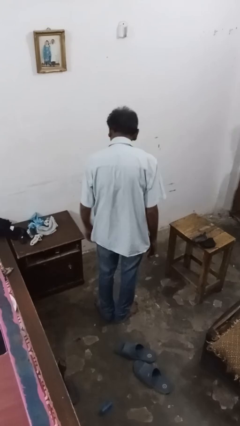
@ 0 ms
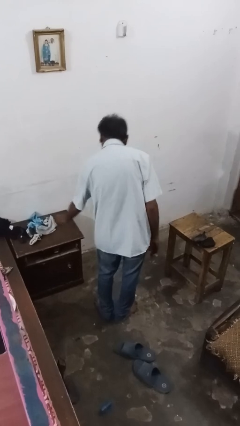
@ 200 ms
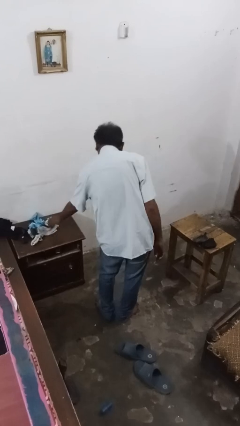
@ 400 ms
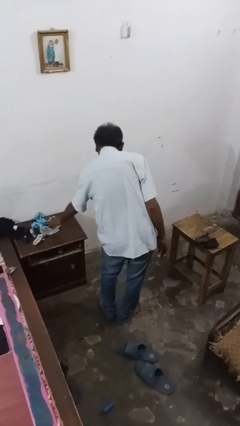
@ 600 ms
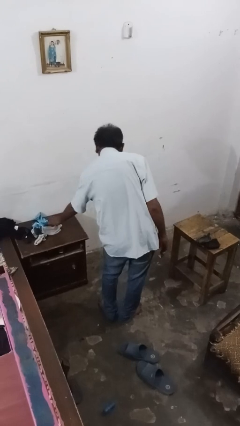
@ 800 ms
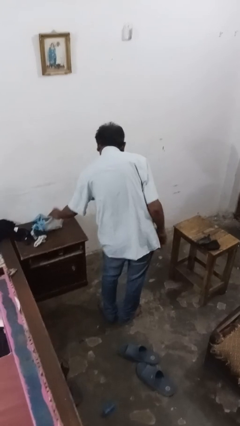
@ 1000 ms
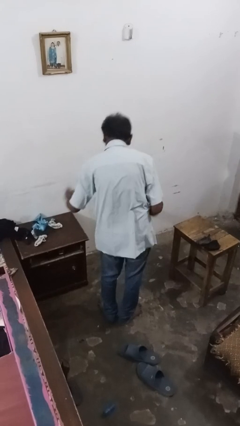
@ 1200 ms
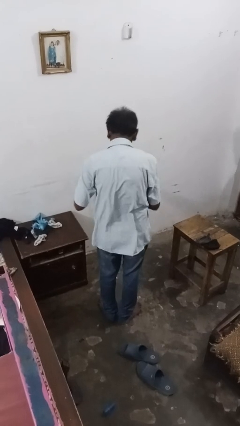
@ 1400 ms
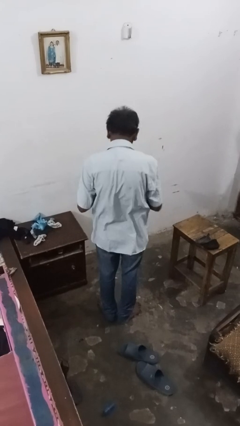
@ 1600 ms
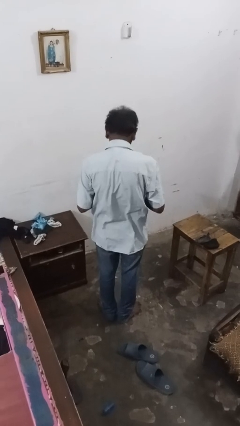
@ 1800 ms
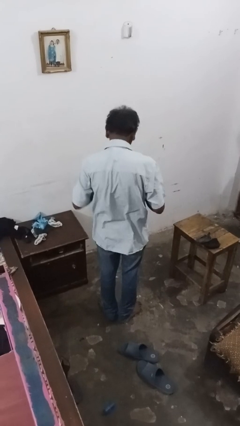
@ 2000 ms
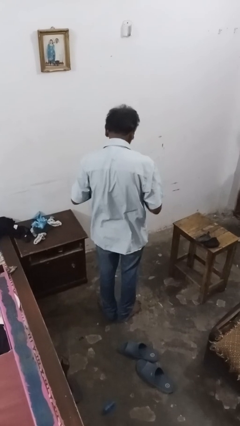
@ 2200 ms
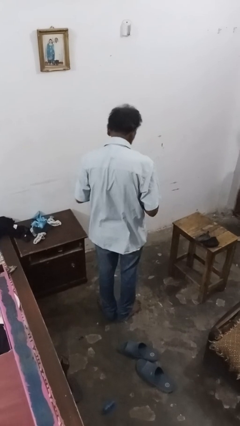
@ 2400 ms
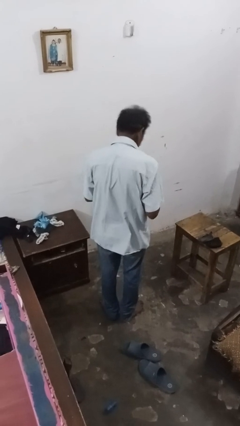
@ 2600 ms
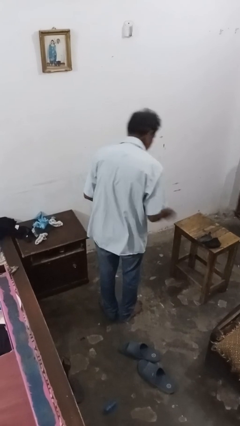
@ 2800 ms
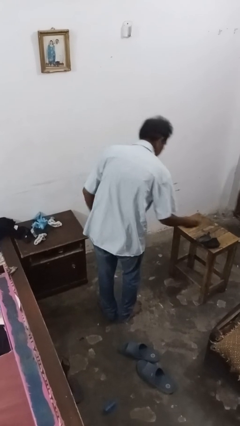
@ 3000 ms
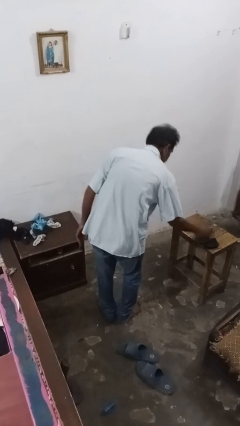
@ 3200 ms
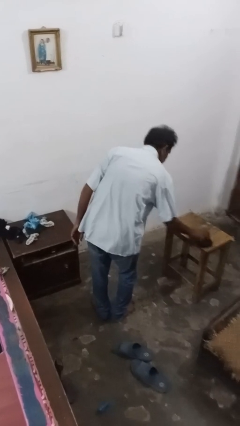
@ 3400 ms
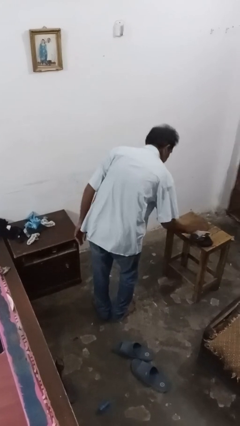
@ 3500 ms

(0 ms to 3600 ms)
person folds socks

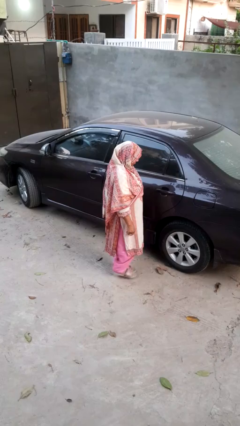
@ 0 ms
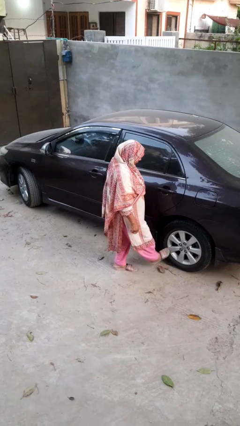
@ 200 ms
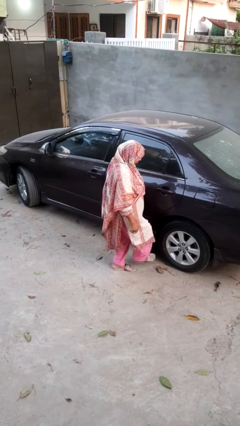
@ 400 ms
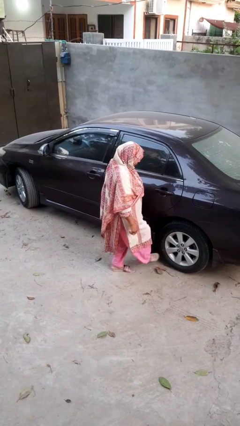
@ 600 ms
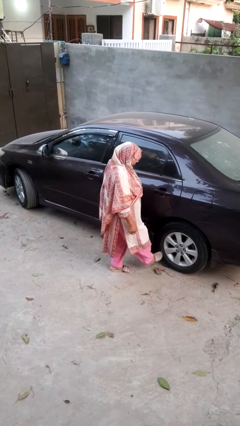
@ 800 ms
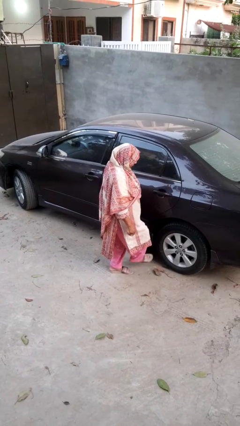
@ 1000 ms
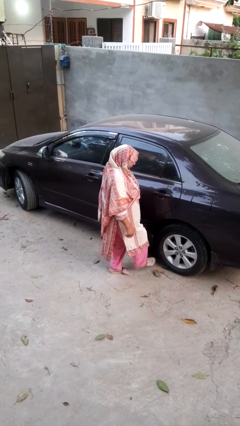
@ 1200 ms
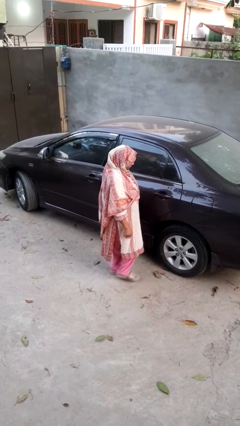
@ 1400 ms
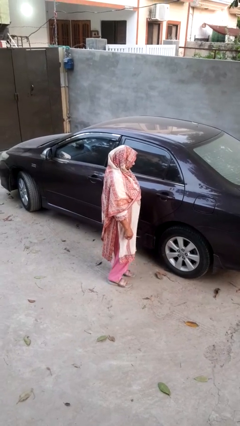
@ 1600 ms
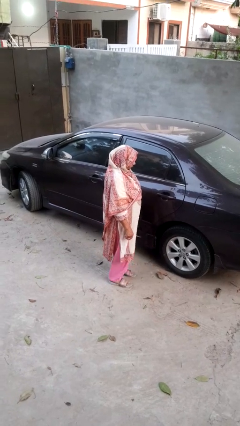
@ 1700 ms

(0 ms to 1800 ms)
person kicks car tires

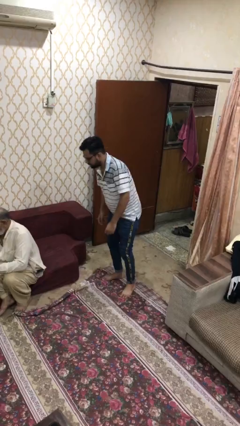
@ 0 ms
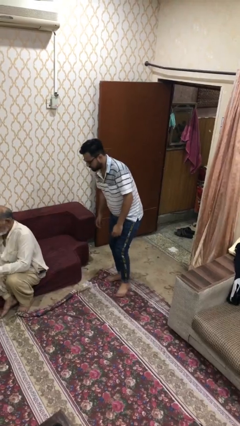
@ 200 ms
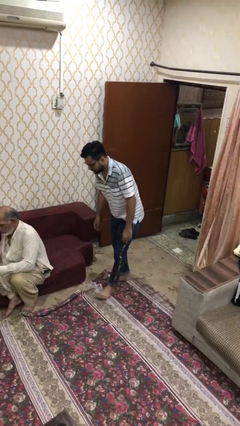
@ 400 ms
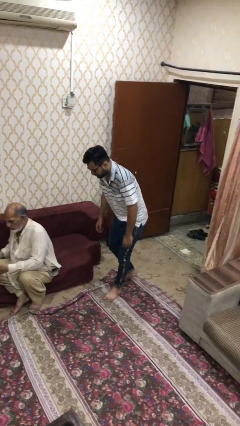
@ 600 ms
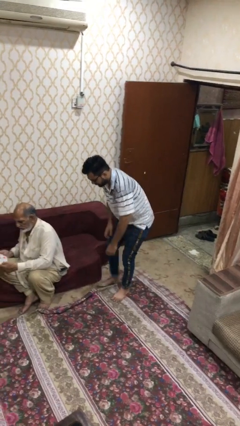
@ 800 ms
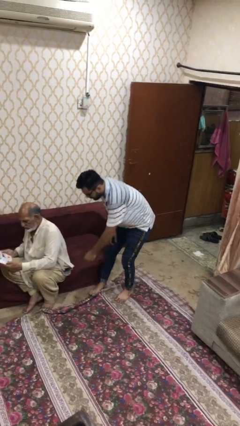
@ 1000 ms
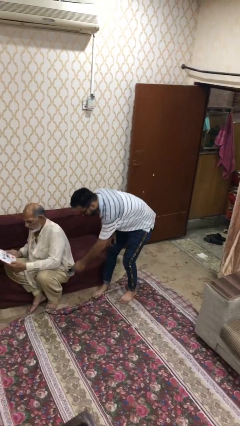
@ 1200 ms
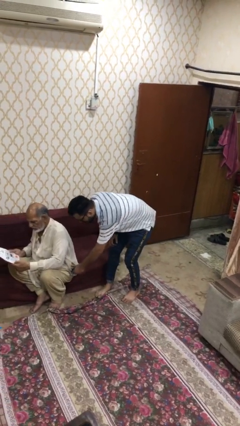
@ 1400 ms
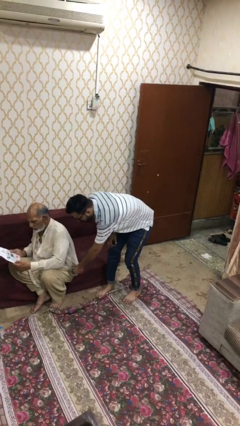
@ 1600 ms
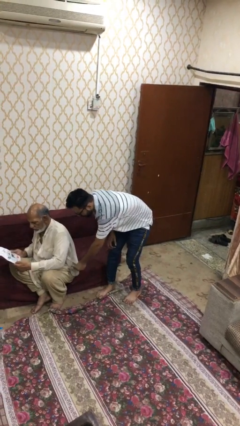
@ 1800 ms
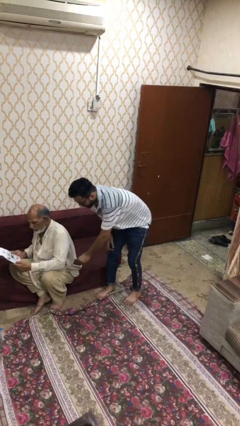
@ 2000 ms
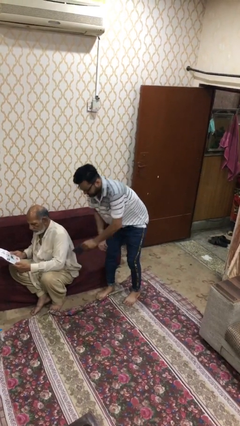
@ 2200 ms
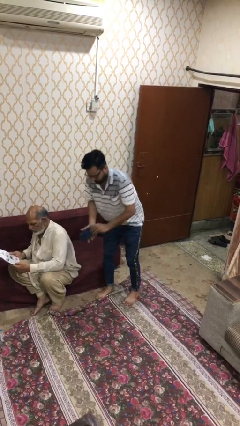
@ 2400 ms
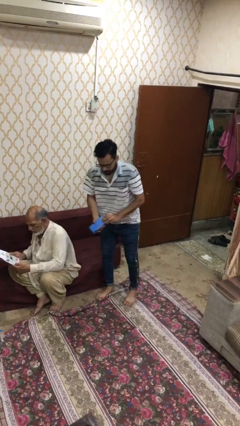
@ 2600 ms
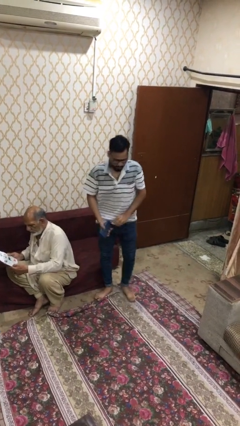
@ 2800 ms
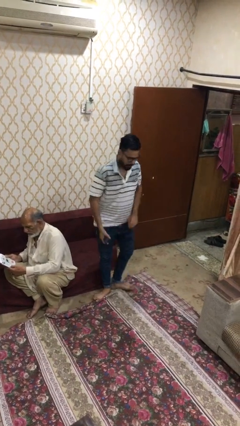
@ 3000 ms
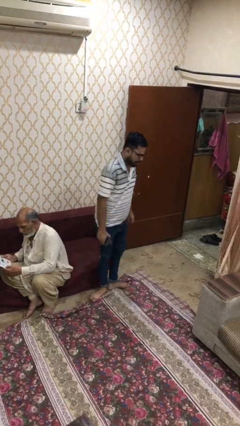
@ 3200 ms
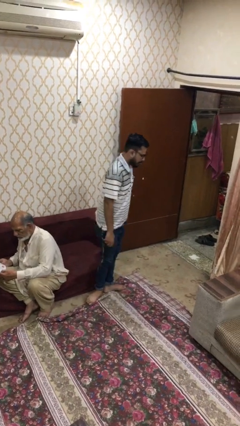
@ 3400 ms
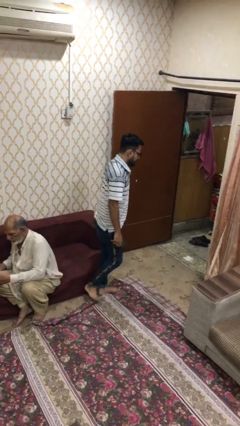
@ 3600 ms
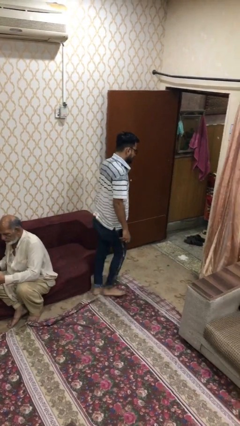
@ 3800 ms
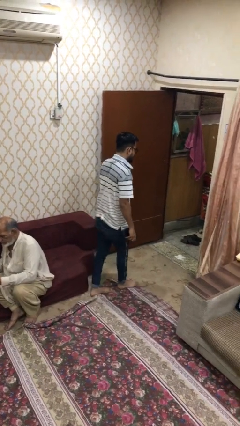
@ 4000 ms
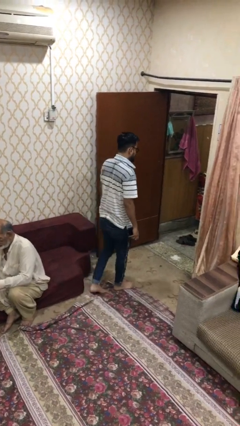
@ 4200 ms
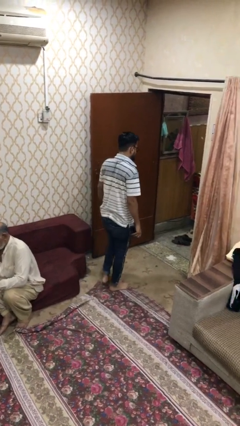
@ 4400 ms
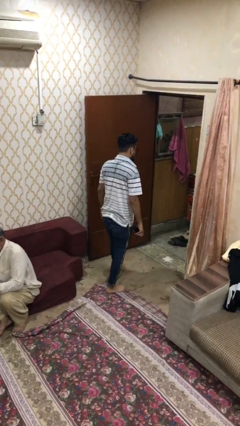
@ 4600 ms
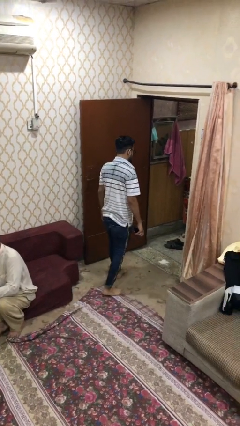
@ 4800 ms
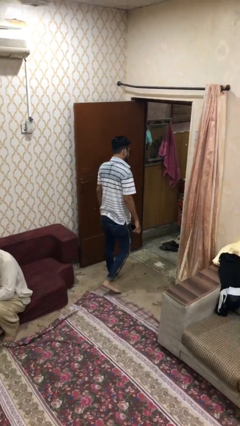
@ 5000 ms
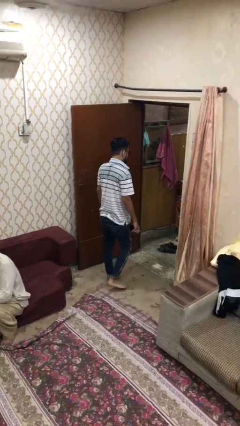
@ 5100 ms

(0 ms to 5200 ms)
person steals object from person

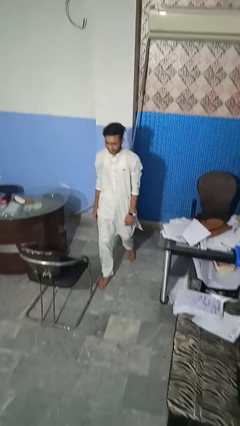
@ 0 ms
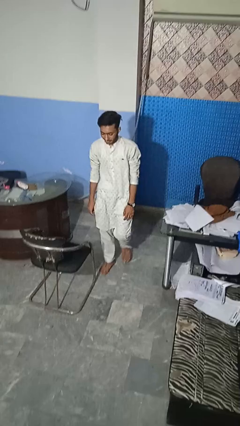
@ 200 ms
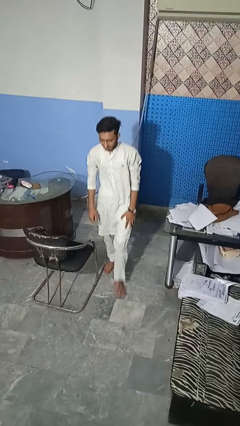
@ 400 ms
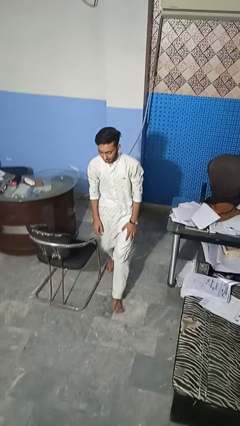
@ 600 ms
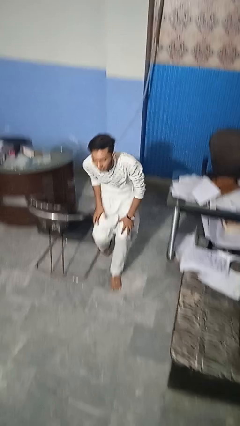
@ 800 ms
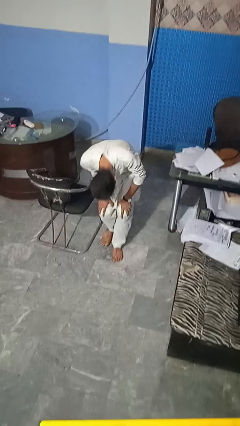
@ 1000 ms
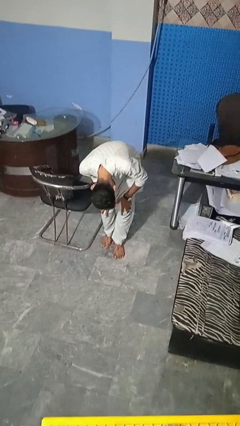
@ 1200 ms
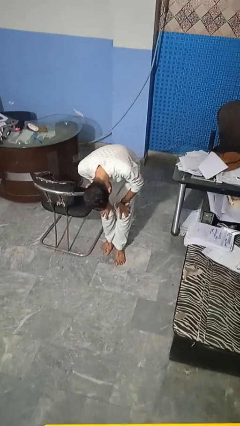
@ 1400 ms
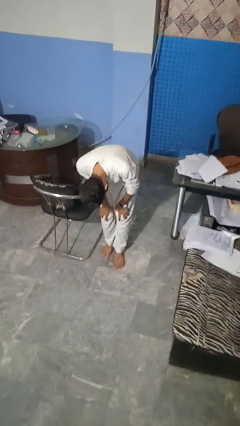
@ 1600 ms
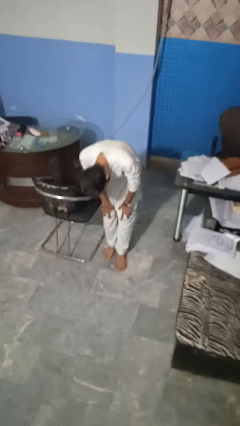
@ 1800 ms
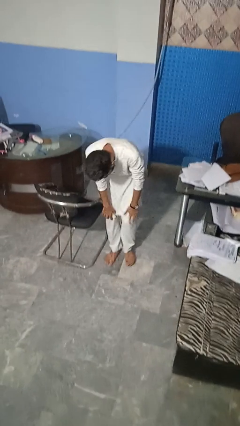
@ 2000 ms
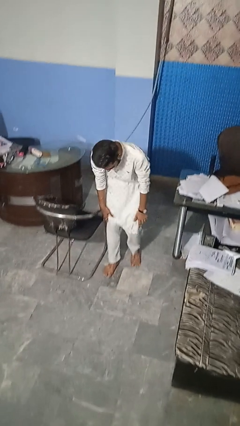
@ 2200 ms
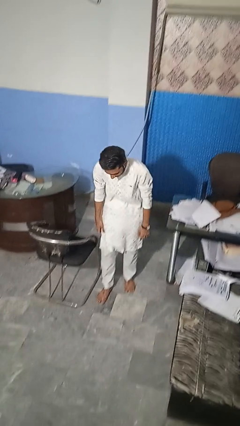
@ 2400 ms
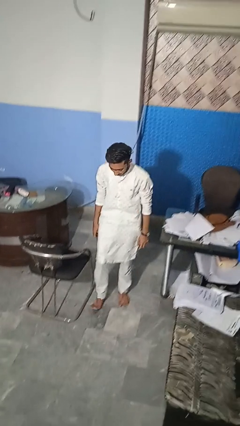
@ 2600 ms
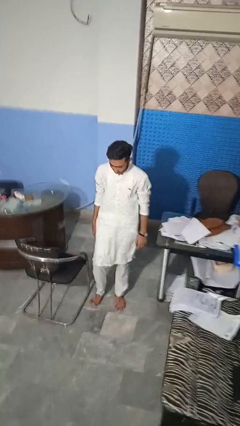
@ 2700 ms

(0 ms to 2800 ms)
person stubs toe

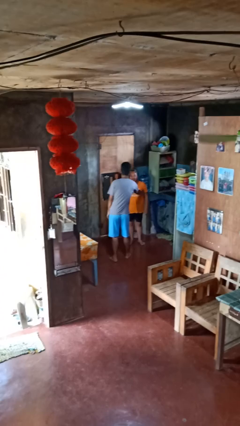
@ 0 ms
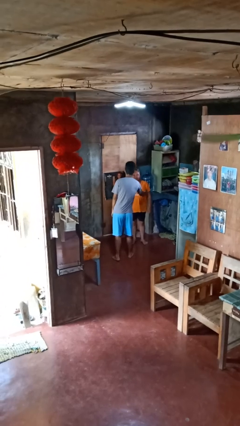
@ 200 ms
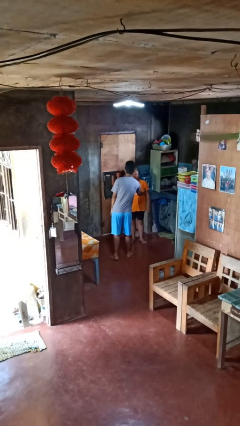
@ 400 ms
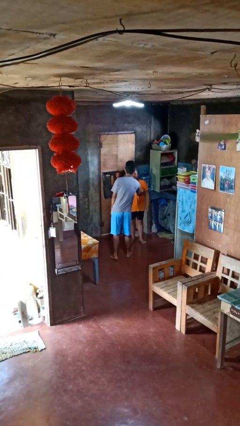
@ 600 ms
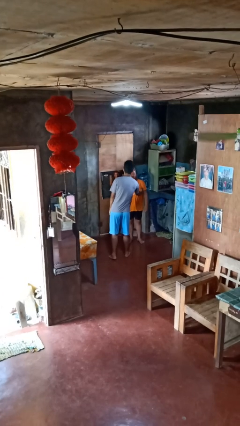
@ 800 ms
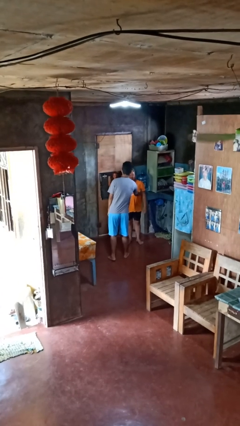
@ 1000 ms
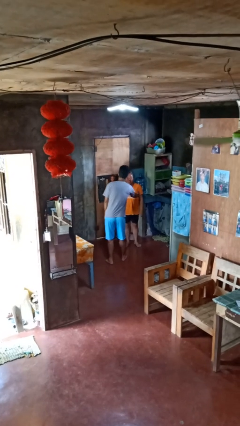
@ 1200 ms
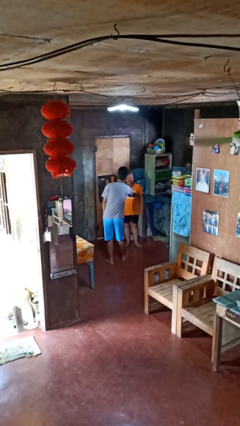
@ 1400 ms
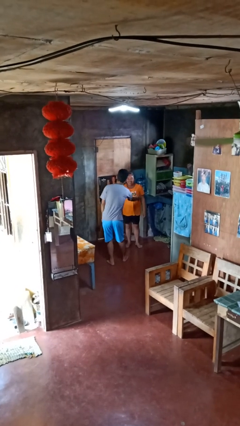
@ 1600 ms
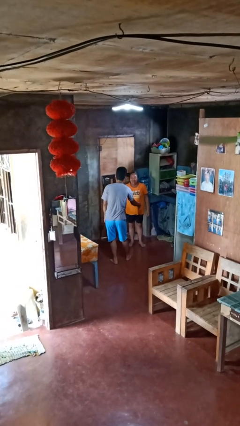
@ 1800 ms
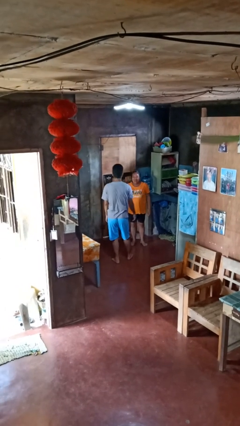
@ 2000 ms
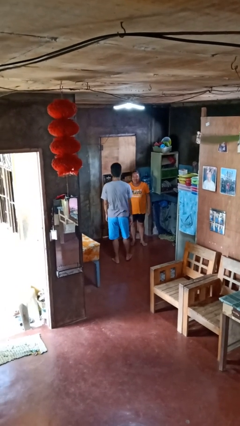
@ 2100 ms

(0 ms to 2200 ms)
person tickles person

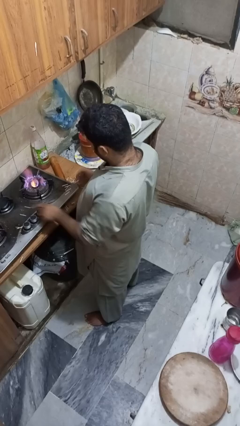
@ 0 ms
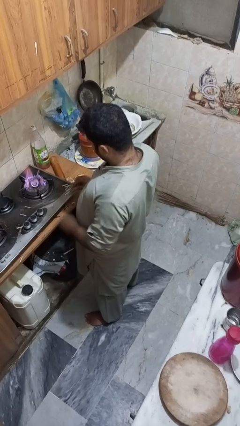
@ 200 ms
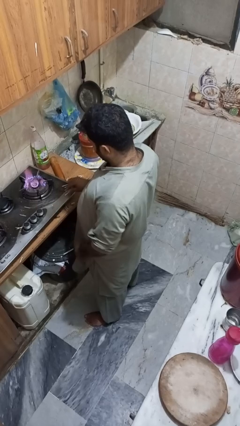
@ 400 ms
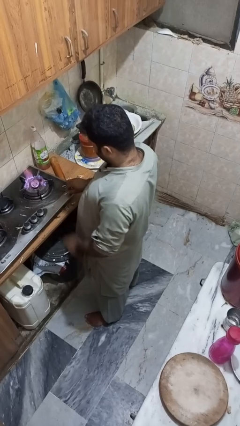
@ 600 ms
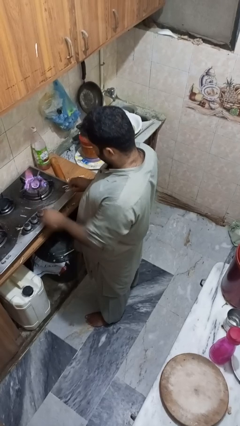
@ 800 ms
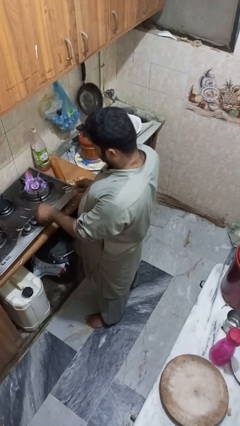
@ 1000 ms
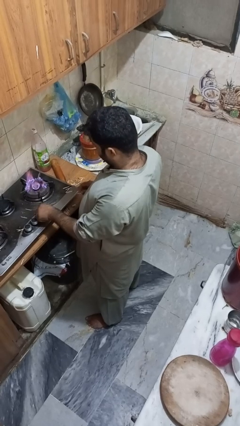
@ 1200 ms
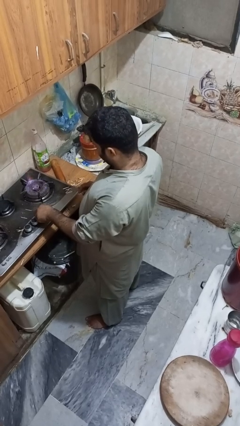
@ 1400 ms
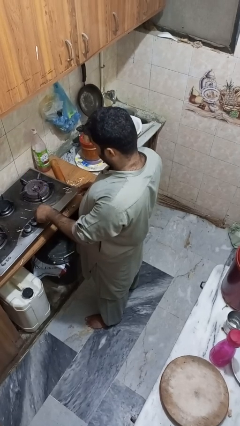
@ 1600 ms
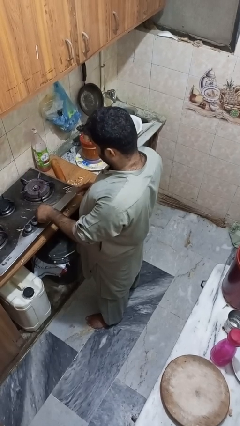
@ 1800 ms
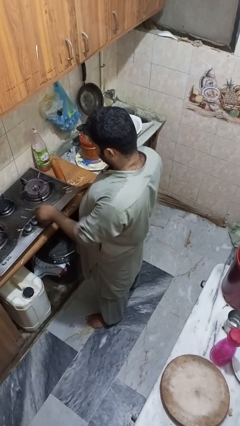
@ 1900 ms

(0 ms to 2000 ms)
person turns off stovetop
